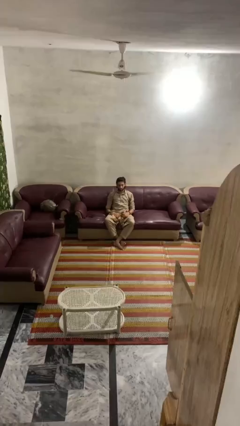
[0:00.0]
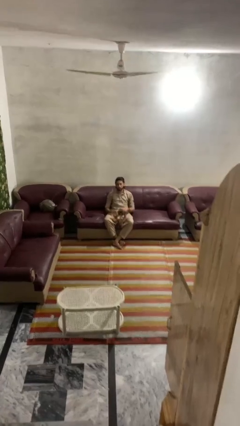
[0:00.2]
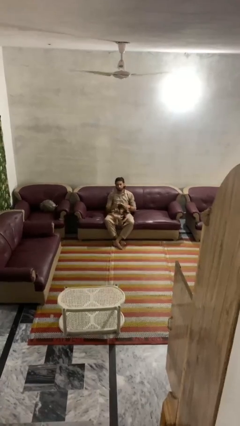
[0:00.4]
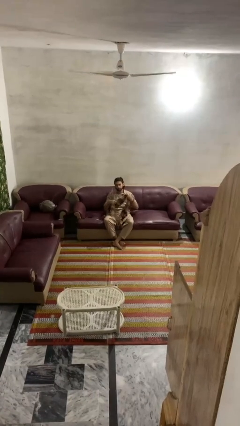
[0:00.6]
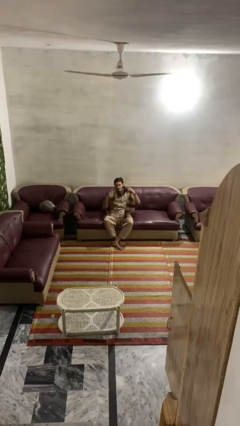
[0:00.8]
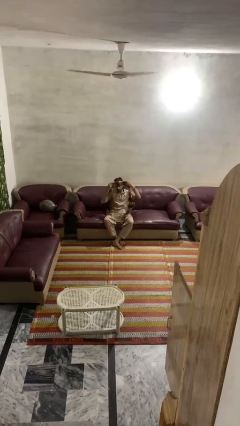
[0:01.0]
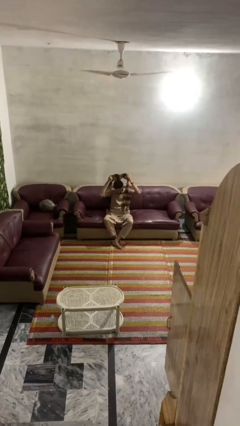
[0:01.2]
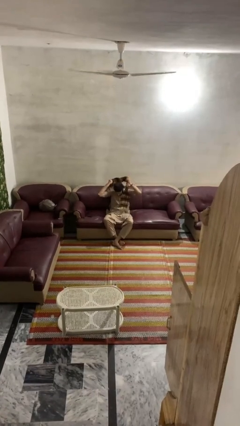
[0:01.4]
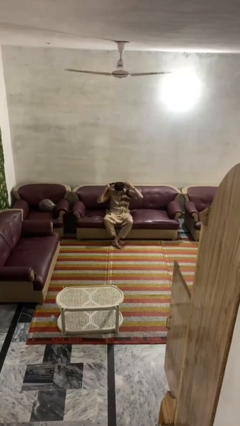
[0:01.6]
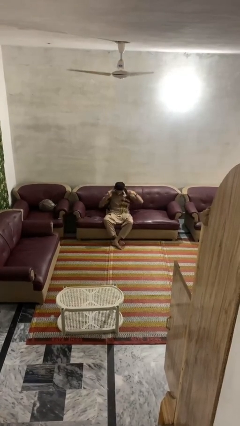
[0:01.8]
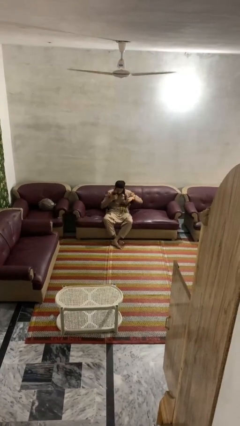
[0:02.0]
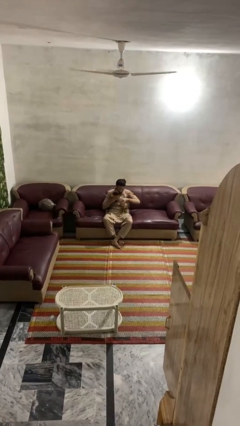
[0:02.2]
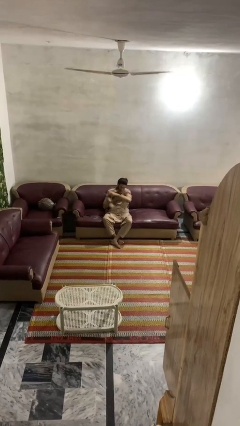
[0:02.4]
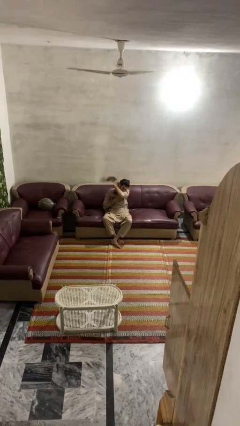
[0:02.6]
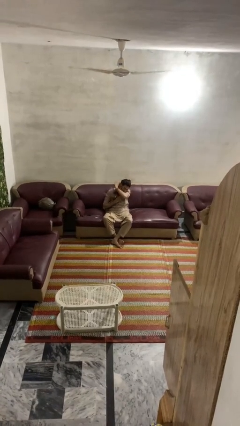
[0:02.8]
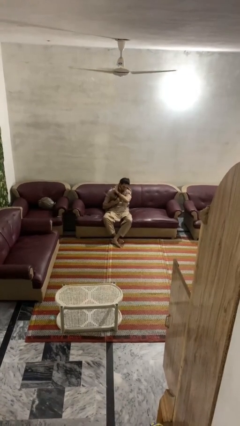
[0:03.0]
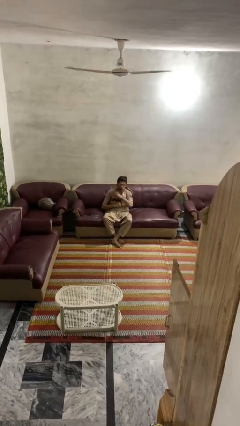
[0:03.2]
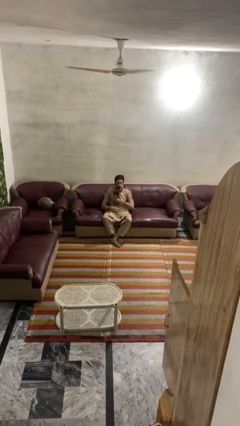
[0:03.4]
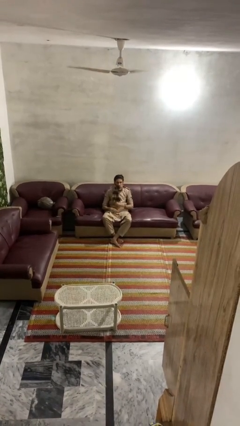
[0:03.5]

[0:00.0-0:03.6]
person puts on scarf

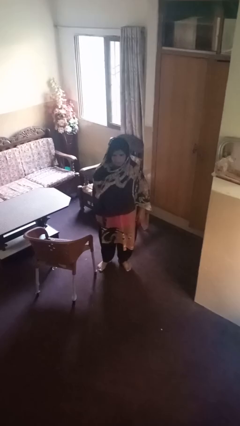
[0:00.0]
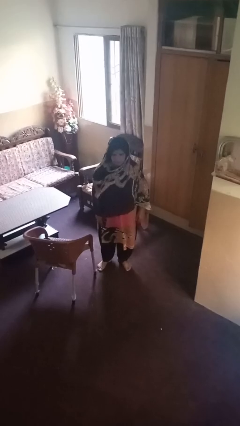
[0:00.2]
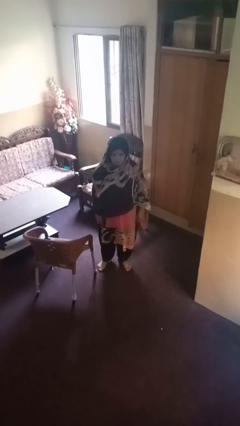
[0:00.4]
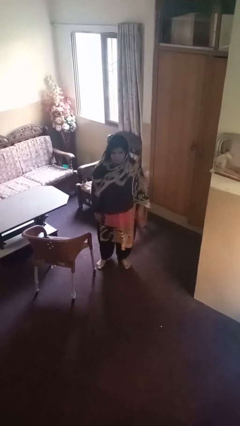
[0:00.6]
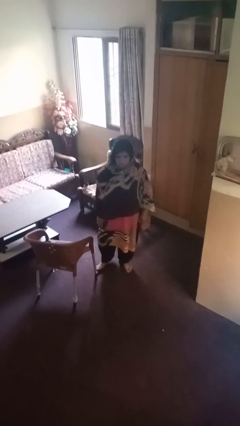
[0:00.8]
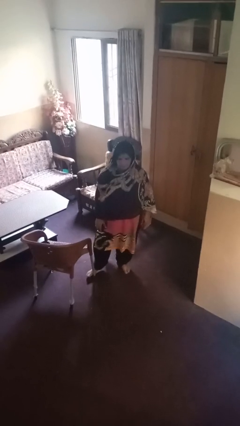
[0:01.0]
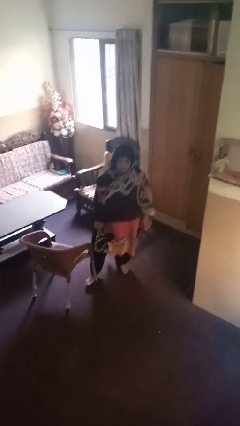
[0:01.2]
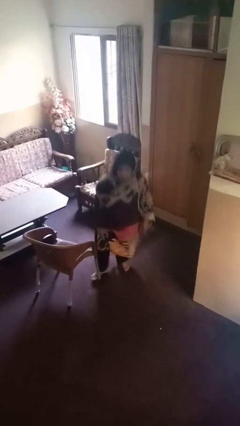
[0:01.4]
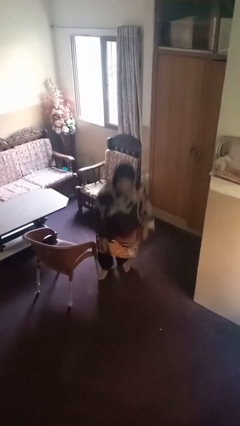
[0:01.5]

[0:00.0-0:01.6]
person trips on object on floor

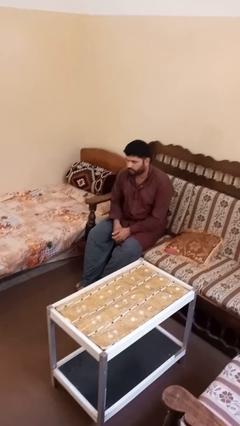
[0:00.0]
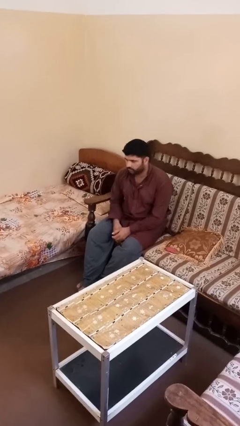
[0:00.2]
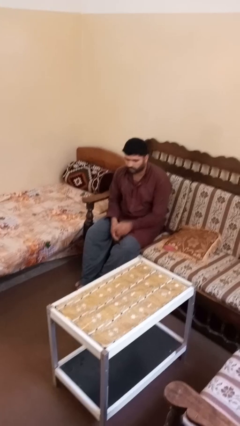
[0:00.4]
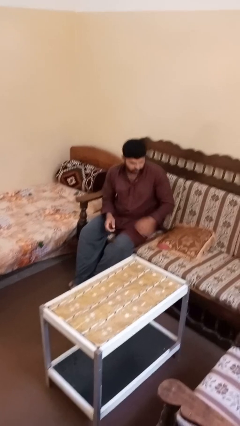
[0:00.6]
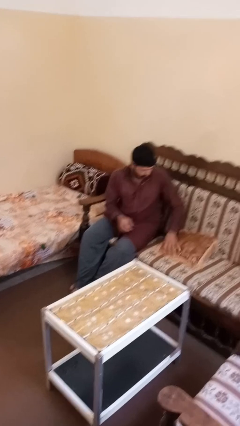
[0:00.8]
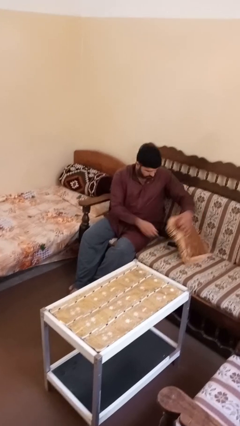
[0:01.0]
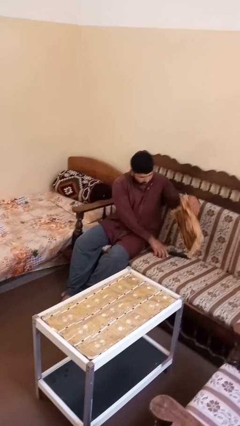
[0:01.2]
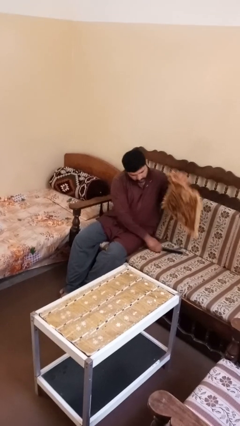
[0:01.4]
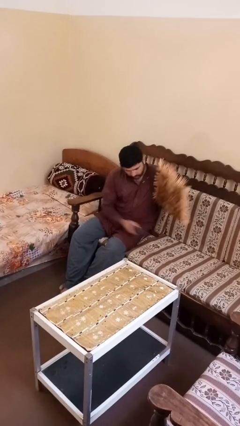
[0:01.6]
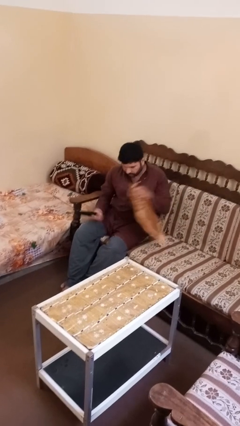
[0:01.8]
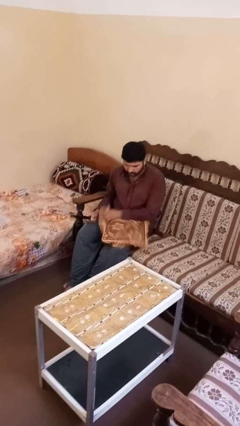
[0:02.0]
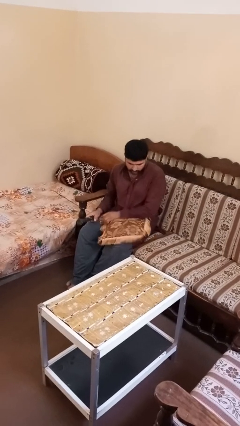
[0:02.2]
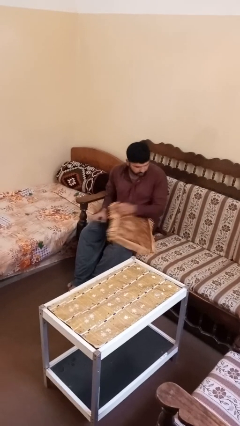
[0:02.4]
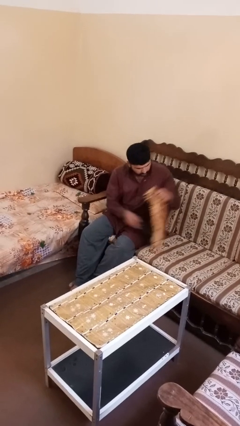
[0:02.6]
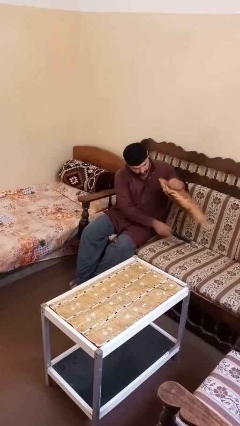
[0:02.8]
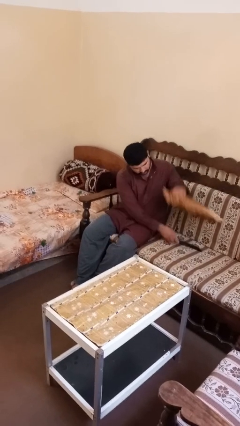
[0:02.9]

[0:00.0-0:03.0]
person searches in couch

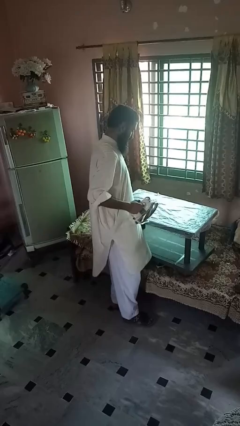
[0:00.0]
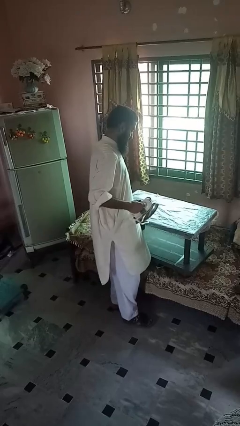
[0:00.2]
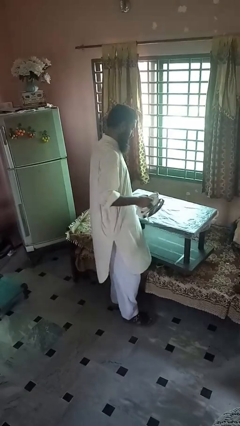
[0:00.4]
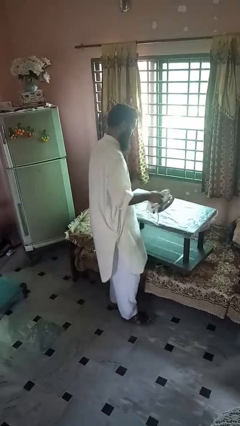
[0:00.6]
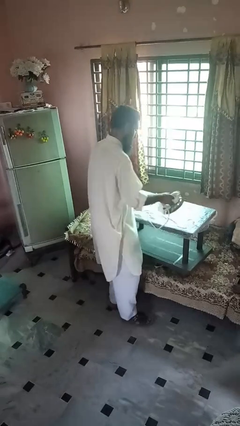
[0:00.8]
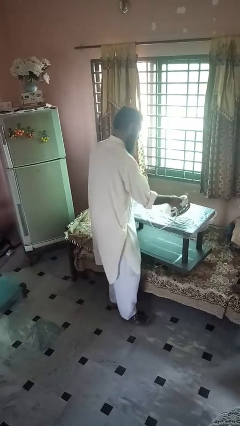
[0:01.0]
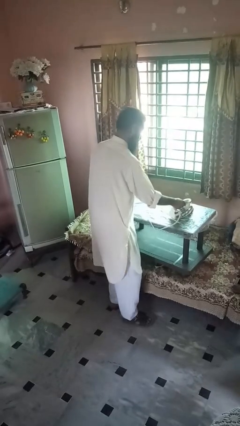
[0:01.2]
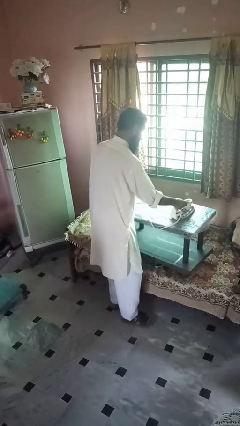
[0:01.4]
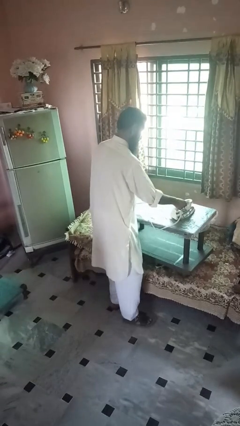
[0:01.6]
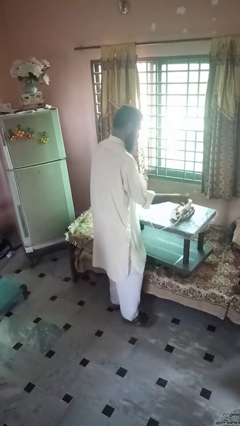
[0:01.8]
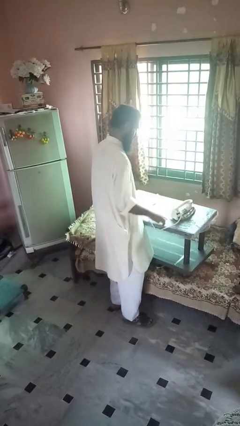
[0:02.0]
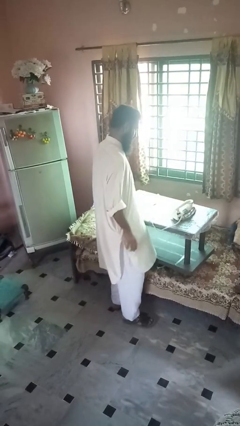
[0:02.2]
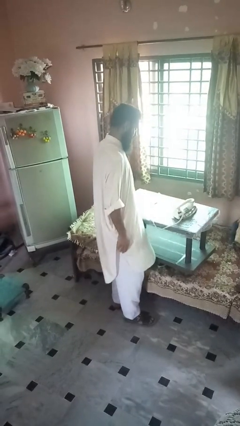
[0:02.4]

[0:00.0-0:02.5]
person puts down object on countertop

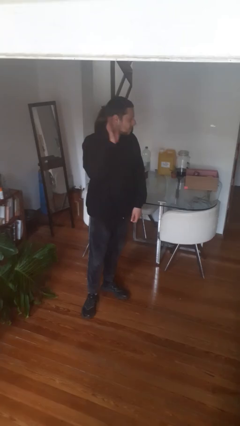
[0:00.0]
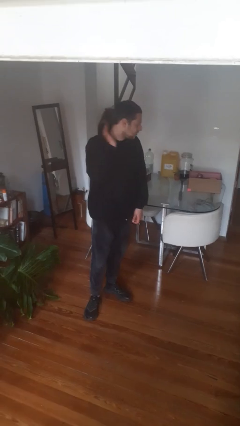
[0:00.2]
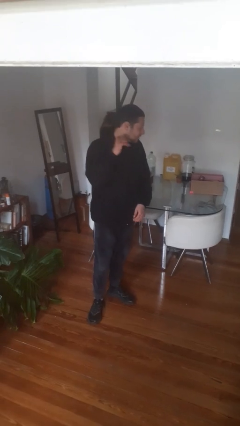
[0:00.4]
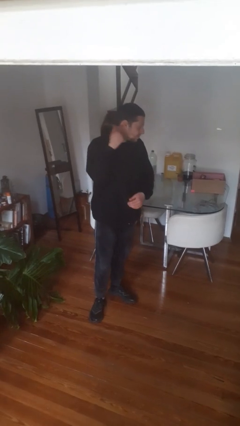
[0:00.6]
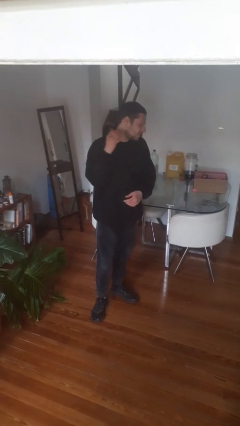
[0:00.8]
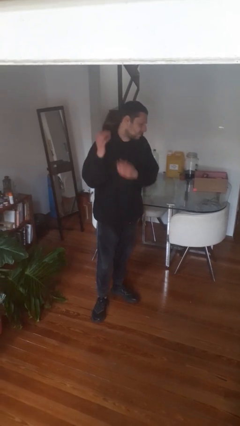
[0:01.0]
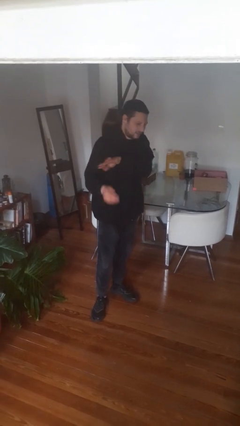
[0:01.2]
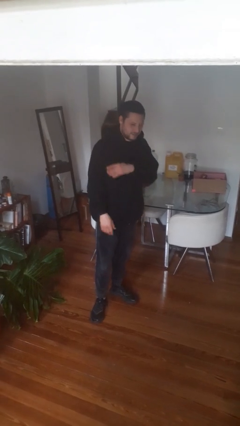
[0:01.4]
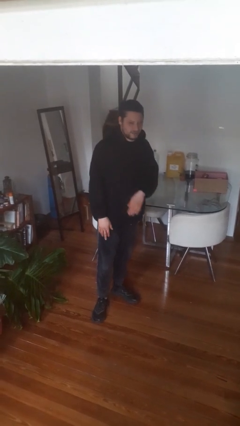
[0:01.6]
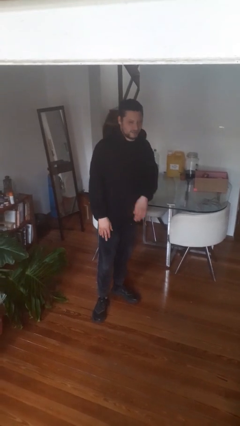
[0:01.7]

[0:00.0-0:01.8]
person swats bug

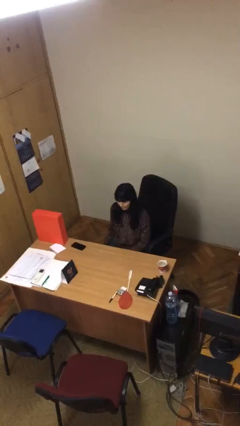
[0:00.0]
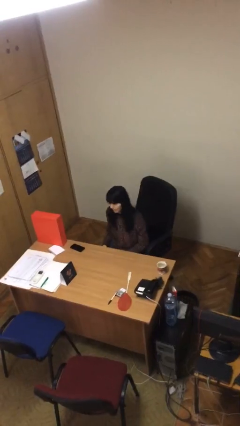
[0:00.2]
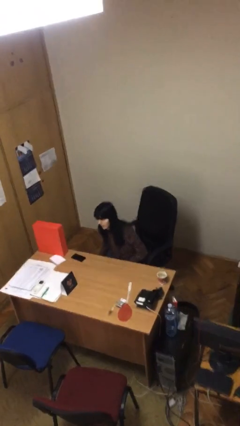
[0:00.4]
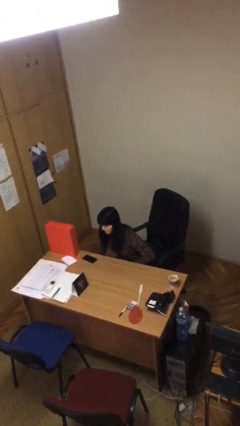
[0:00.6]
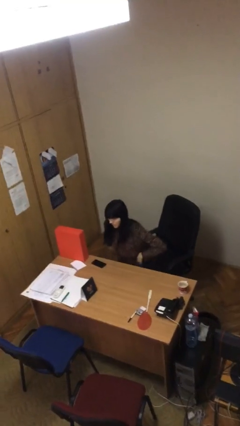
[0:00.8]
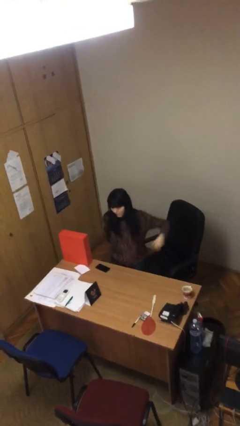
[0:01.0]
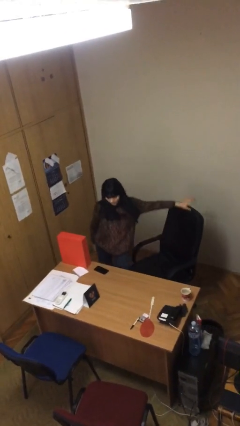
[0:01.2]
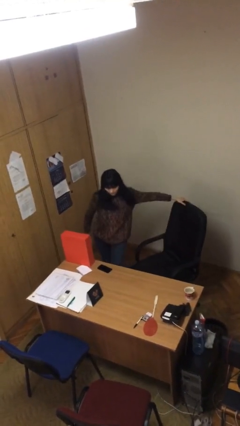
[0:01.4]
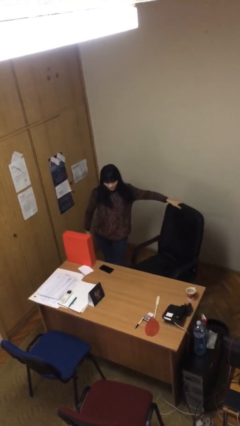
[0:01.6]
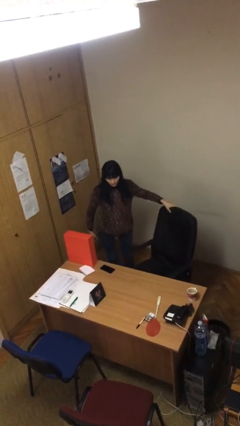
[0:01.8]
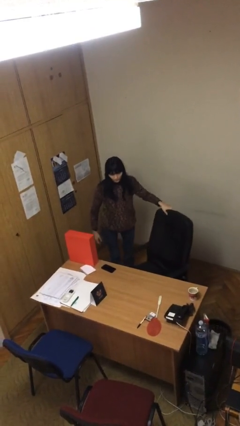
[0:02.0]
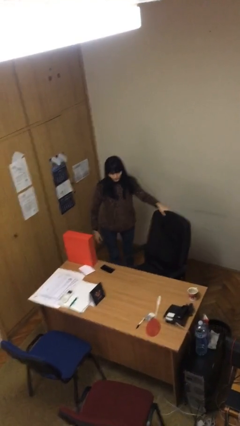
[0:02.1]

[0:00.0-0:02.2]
person stands up

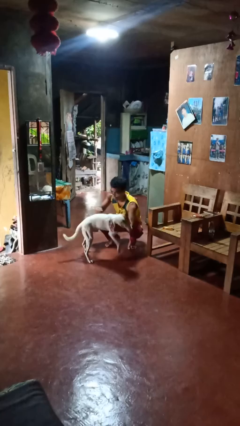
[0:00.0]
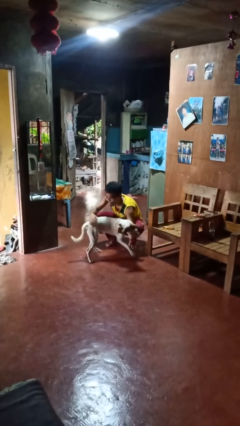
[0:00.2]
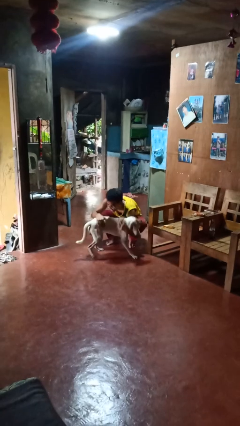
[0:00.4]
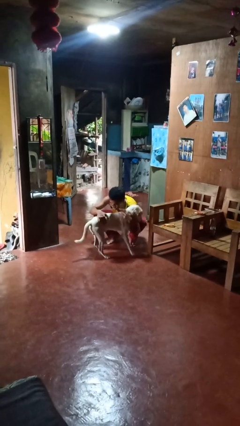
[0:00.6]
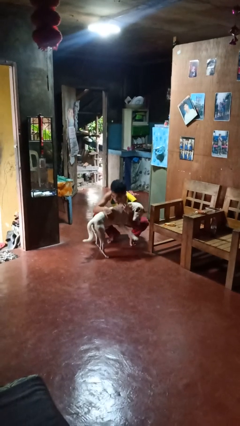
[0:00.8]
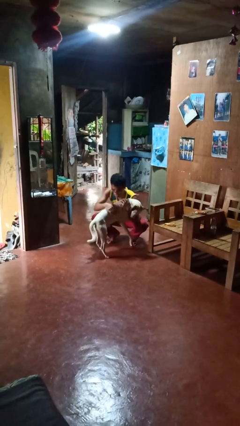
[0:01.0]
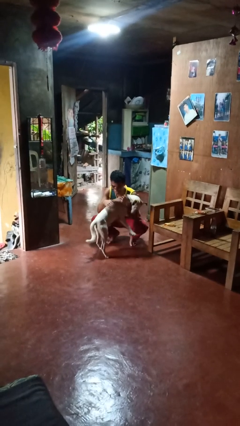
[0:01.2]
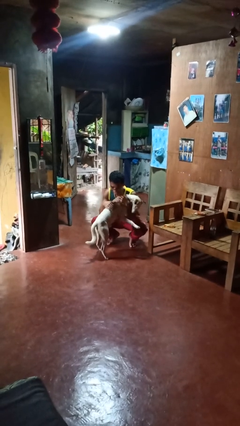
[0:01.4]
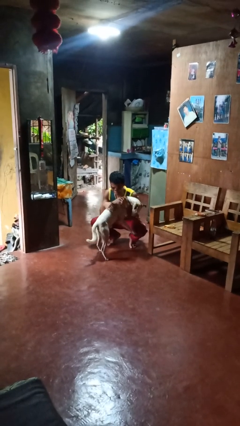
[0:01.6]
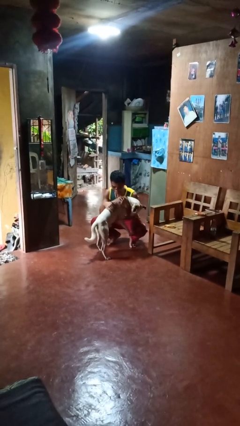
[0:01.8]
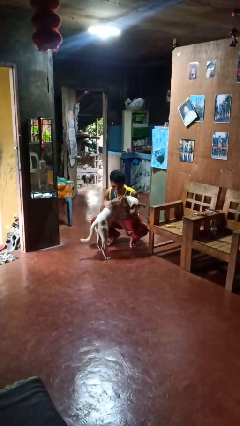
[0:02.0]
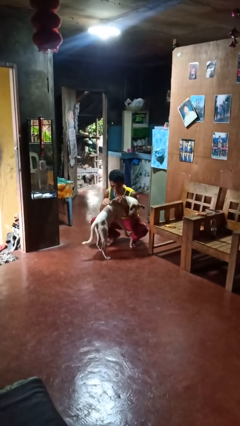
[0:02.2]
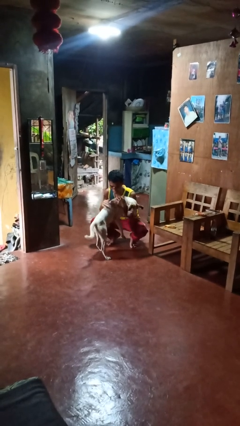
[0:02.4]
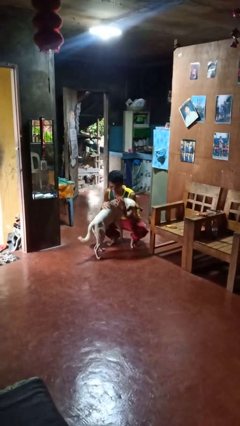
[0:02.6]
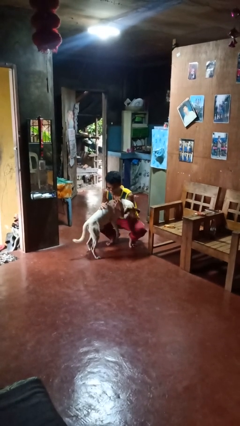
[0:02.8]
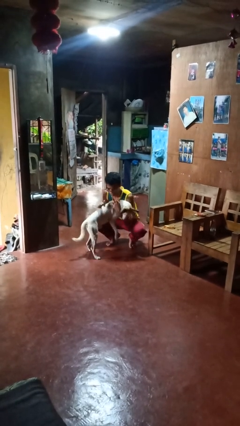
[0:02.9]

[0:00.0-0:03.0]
person hugs dog
